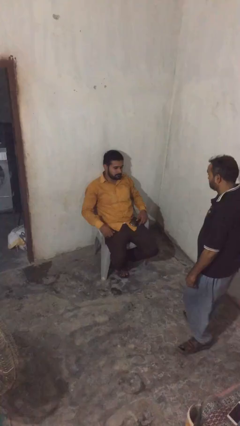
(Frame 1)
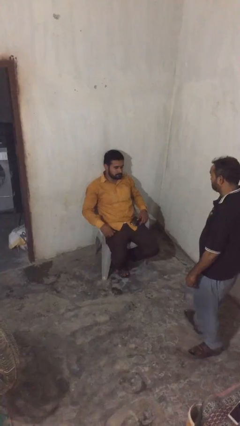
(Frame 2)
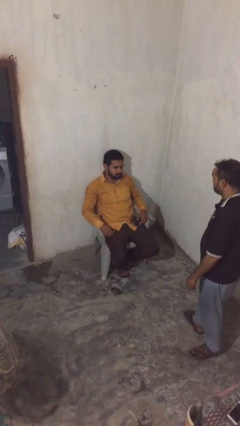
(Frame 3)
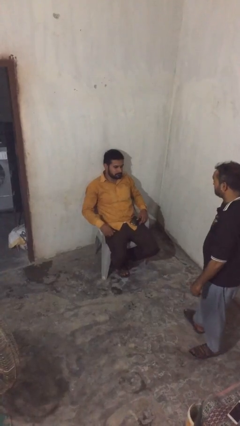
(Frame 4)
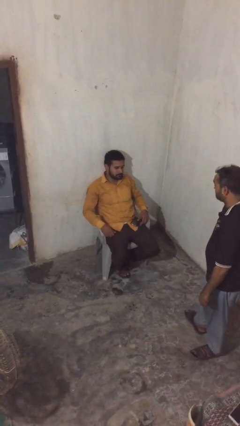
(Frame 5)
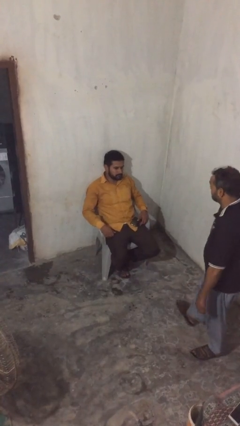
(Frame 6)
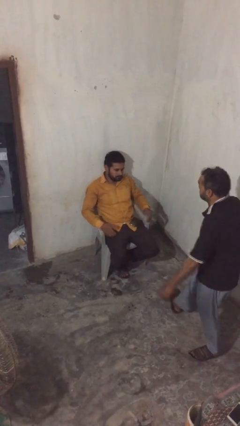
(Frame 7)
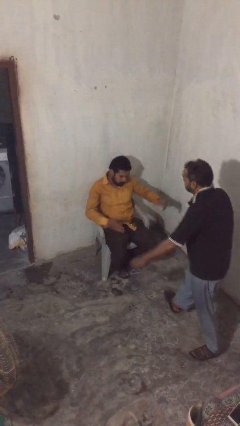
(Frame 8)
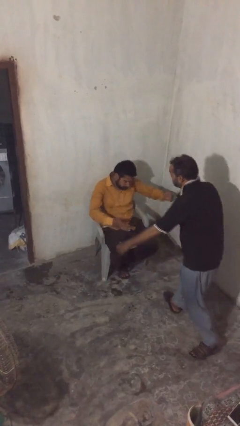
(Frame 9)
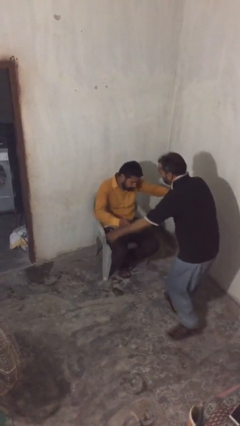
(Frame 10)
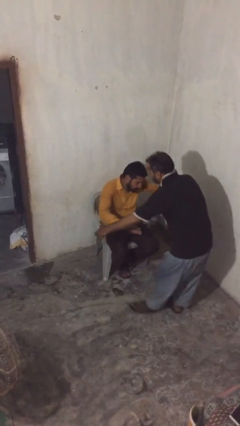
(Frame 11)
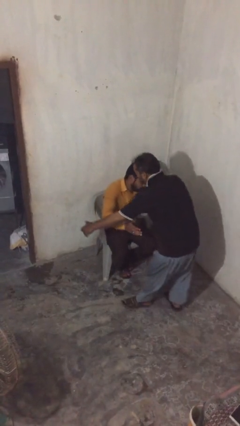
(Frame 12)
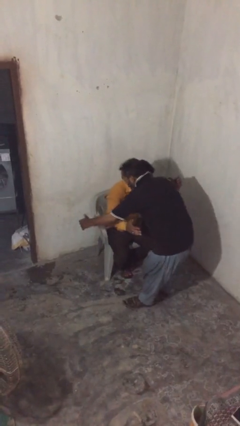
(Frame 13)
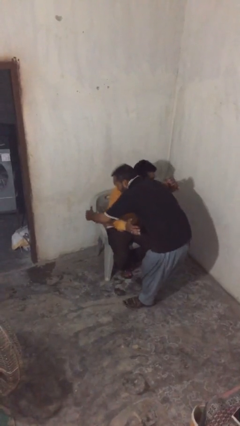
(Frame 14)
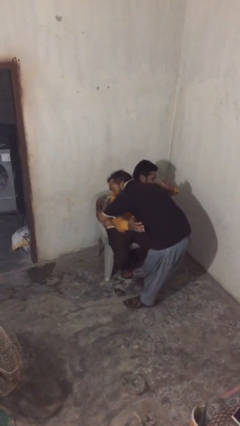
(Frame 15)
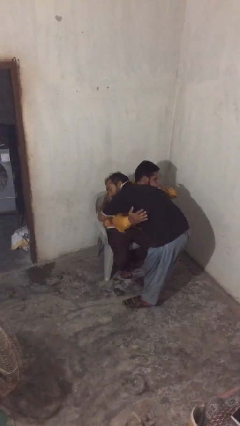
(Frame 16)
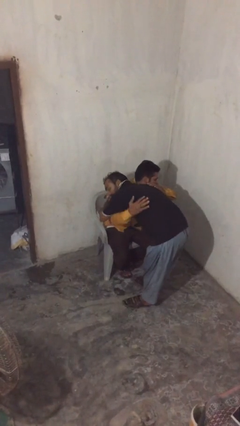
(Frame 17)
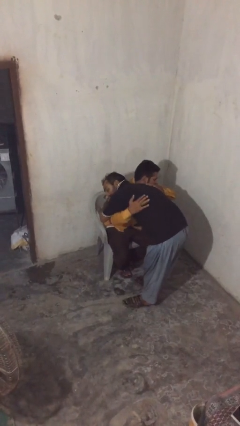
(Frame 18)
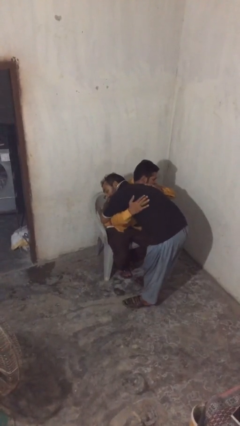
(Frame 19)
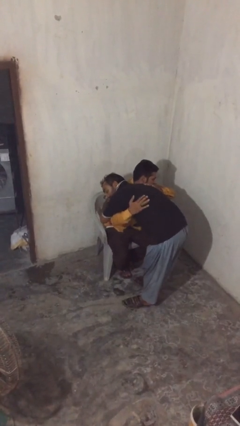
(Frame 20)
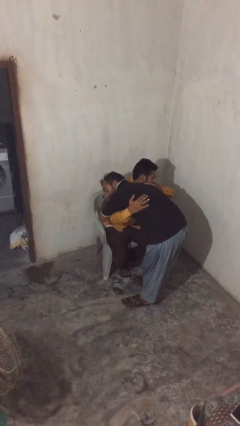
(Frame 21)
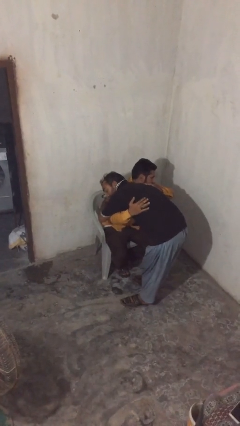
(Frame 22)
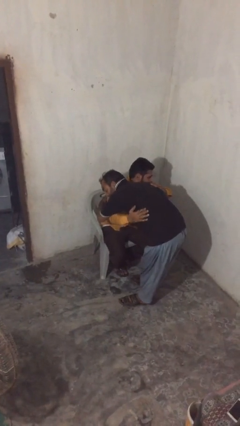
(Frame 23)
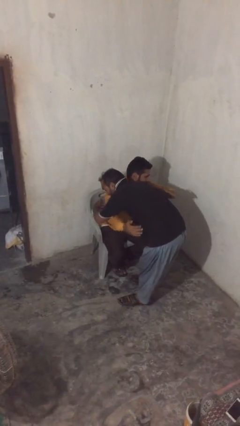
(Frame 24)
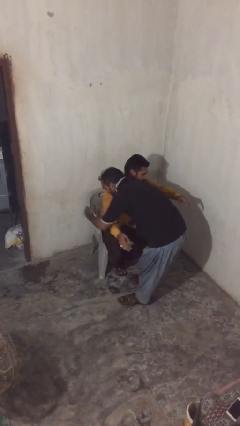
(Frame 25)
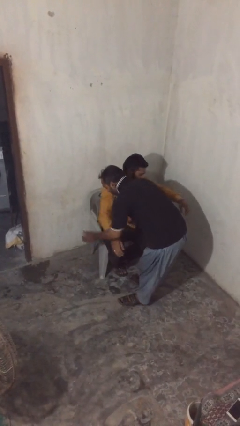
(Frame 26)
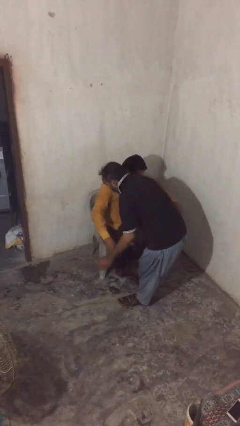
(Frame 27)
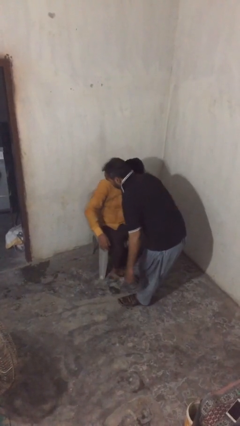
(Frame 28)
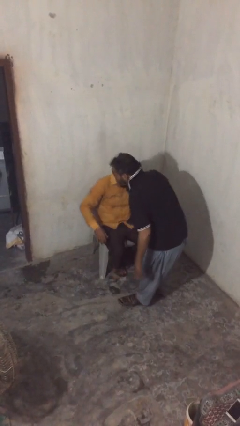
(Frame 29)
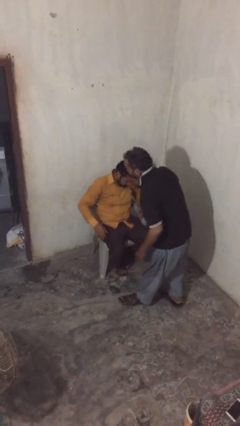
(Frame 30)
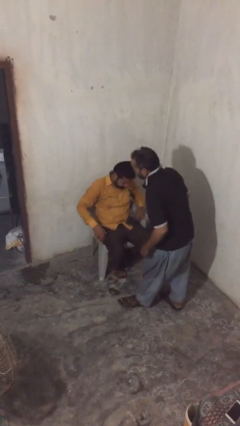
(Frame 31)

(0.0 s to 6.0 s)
person embraces person

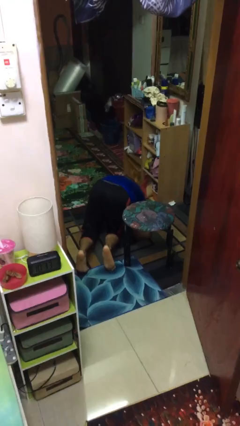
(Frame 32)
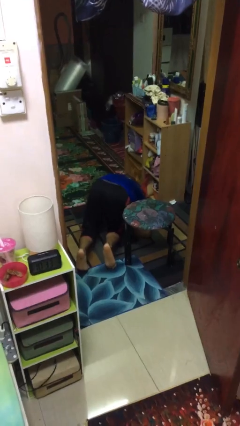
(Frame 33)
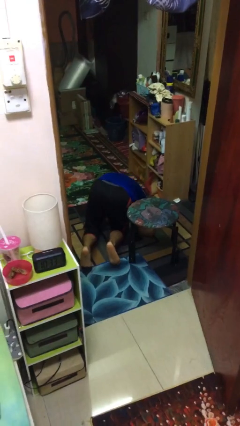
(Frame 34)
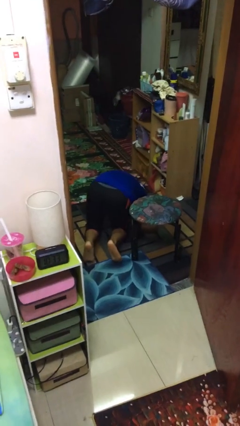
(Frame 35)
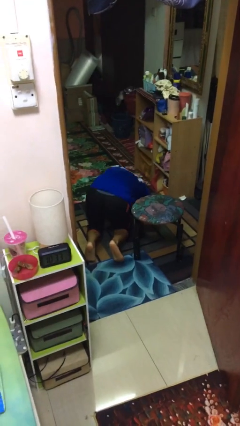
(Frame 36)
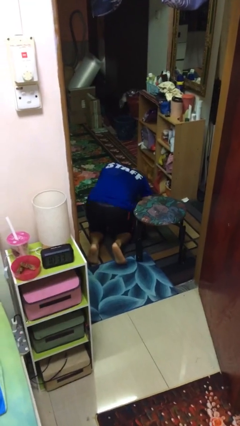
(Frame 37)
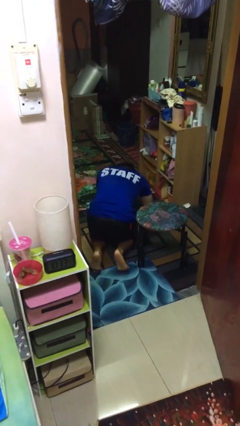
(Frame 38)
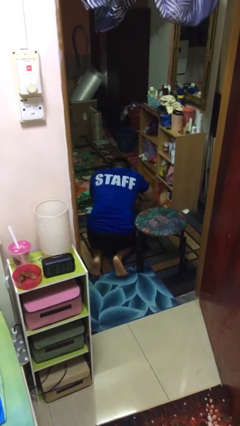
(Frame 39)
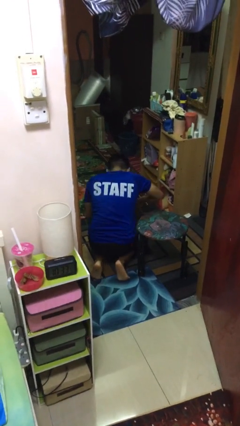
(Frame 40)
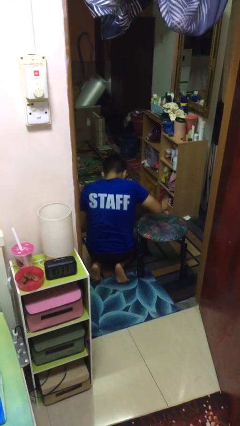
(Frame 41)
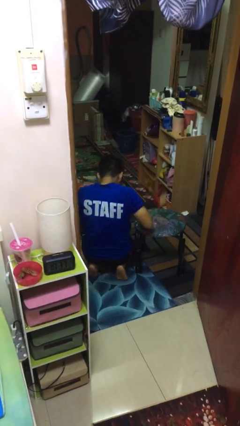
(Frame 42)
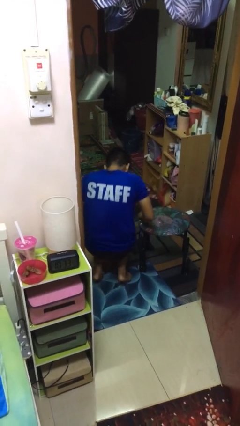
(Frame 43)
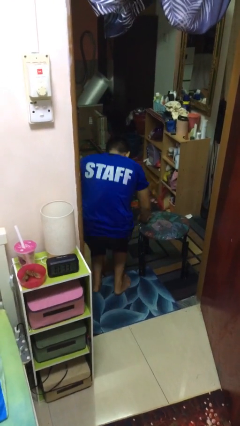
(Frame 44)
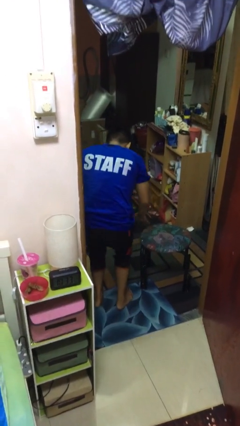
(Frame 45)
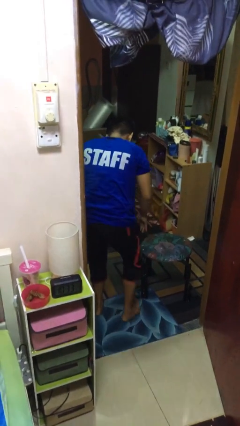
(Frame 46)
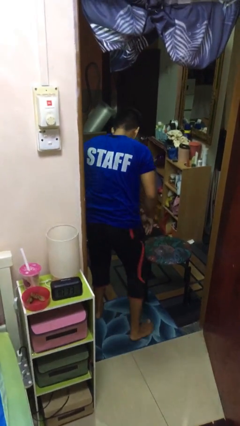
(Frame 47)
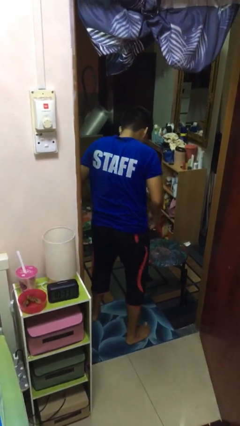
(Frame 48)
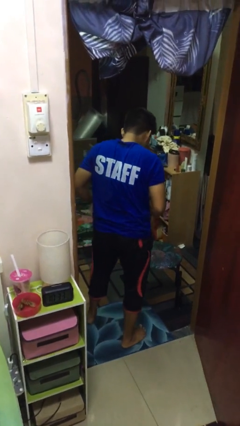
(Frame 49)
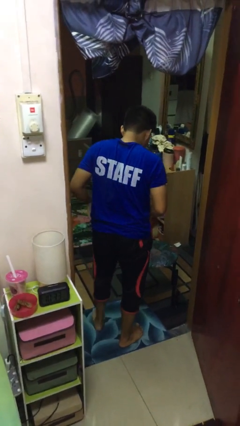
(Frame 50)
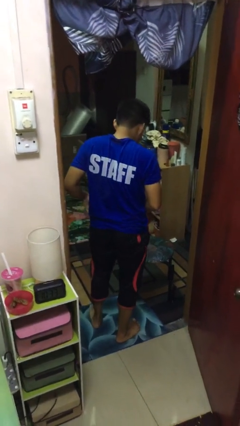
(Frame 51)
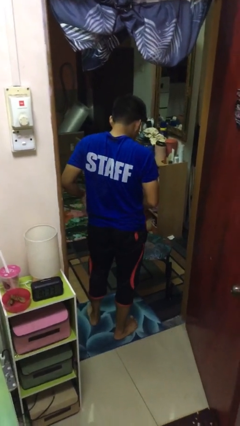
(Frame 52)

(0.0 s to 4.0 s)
person stands up from floor

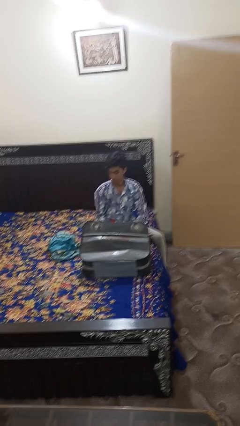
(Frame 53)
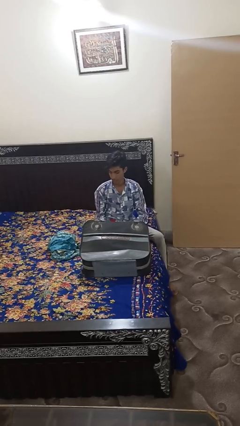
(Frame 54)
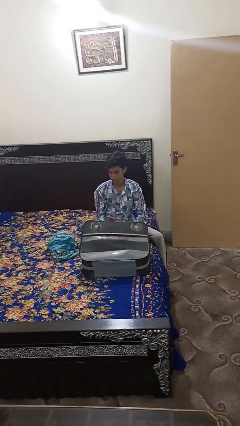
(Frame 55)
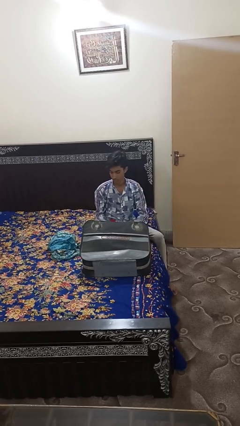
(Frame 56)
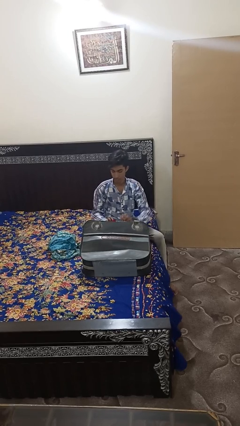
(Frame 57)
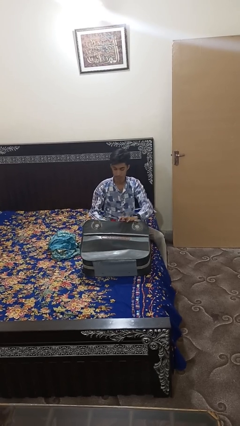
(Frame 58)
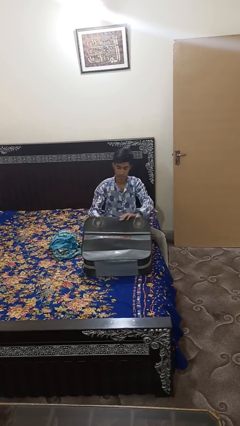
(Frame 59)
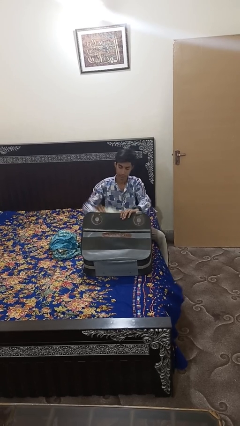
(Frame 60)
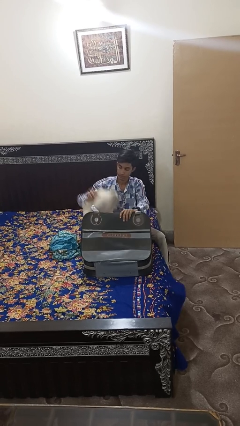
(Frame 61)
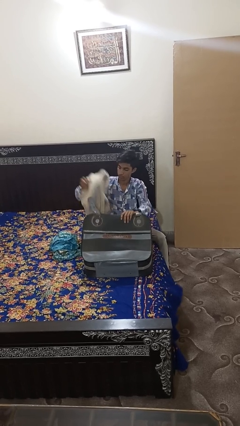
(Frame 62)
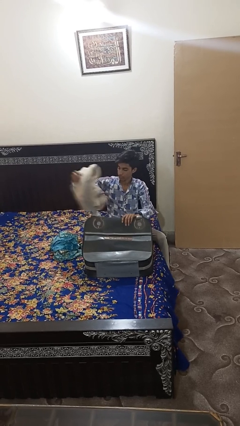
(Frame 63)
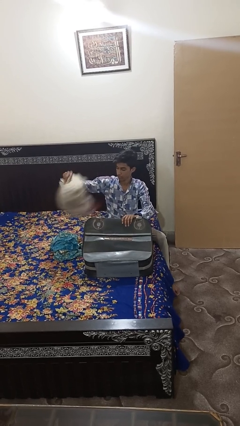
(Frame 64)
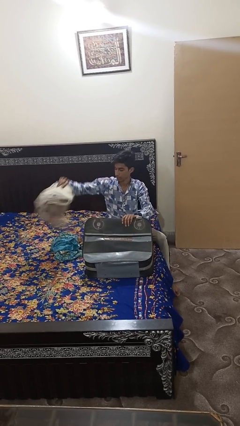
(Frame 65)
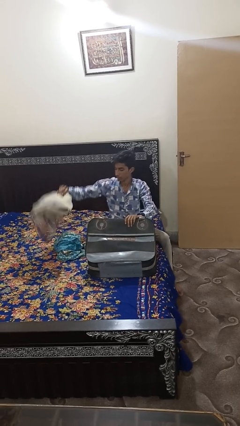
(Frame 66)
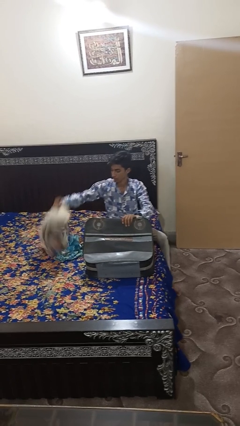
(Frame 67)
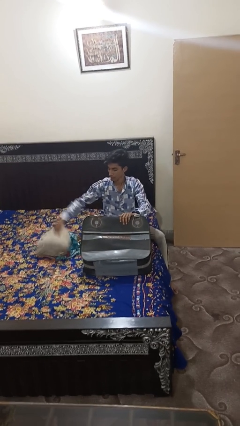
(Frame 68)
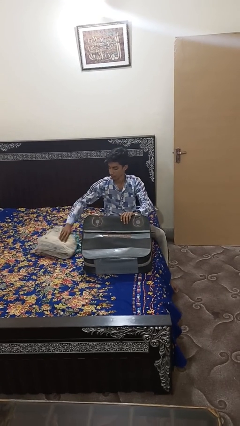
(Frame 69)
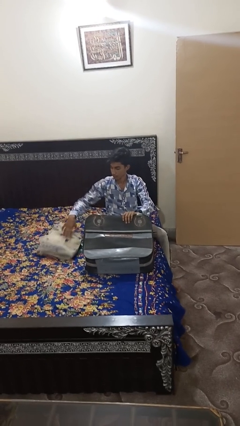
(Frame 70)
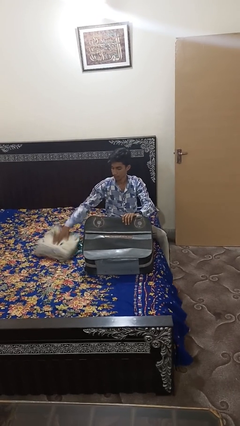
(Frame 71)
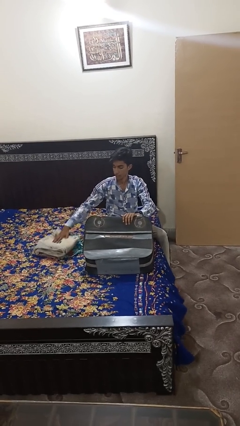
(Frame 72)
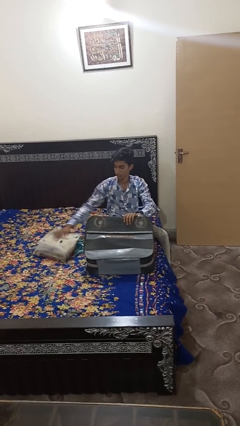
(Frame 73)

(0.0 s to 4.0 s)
person unloads clothes from suitcase

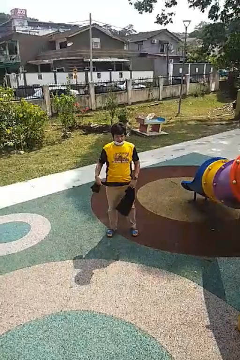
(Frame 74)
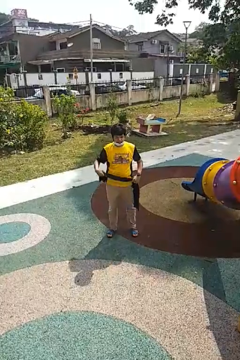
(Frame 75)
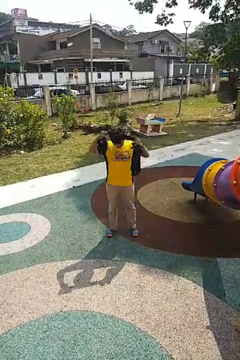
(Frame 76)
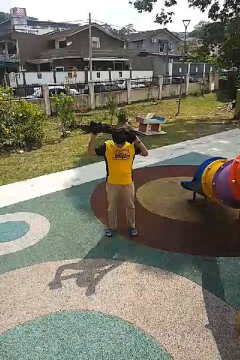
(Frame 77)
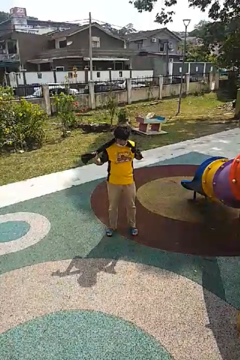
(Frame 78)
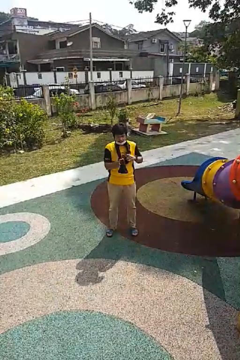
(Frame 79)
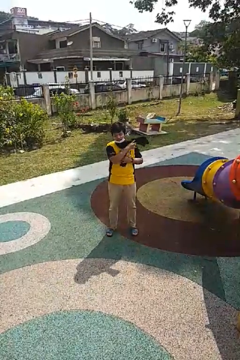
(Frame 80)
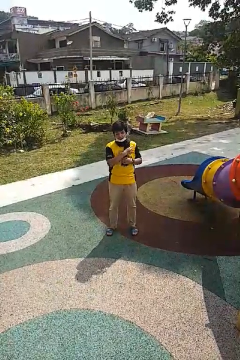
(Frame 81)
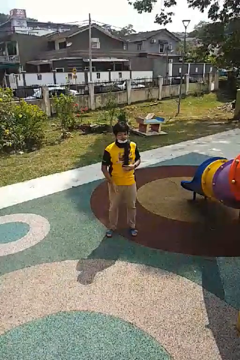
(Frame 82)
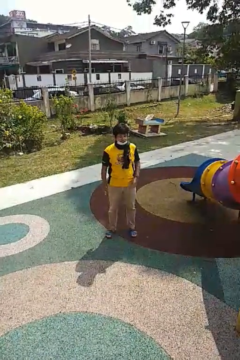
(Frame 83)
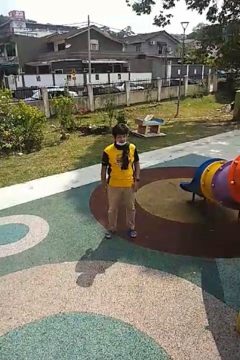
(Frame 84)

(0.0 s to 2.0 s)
person puts on scarf

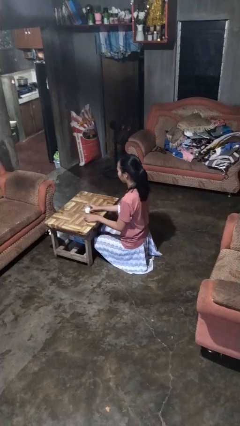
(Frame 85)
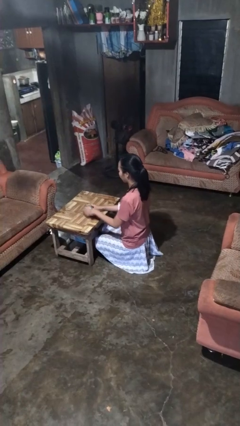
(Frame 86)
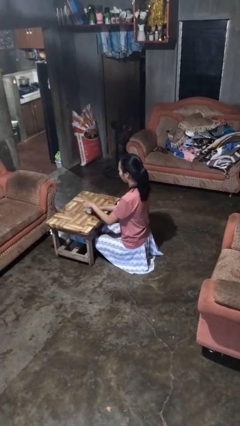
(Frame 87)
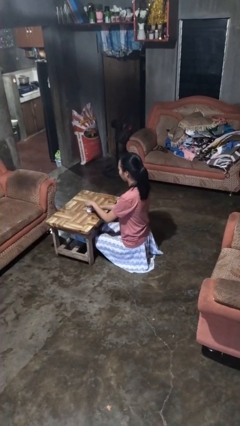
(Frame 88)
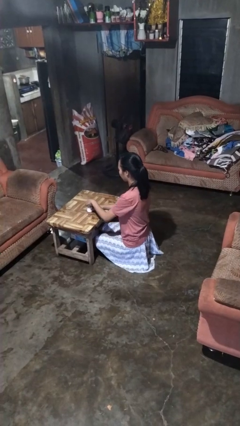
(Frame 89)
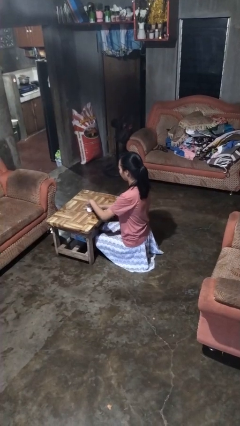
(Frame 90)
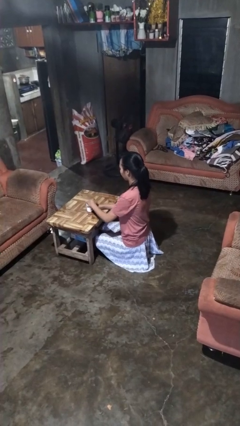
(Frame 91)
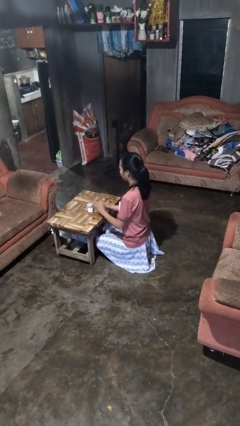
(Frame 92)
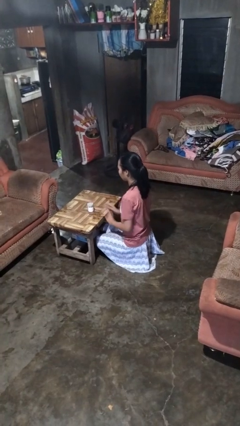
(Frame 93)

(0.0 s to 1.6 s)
person closes jar

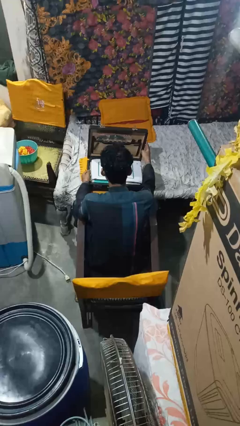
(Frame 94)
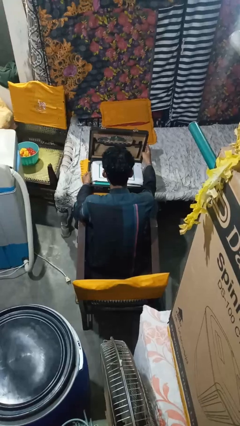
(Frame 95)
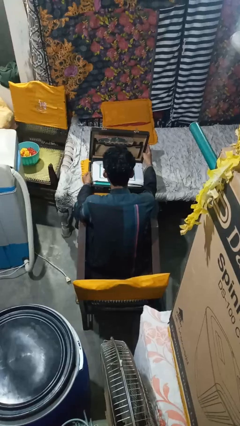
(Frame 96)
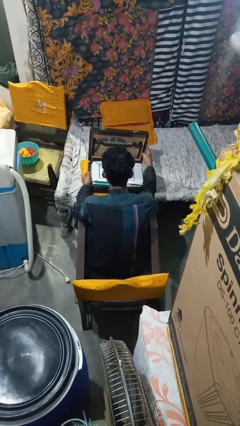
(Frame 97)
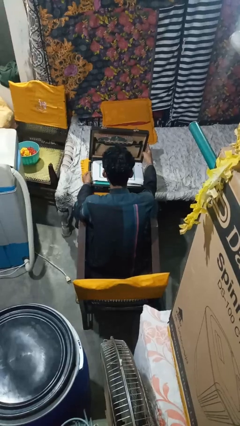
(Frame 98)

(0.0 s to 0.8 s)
person opens suitcase
